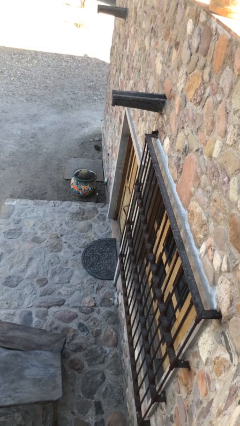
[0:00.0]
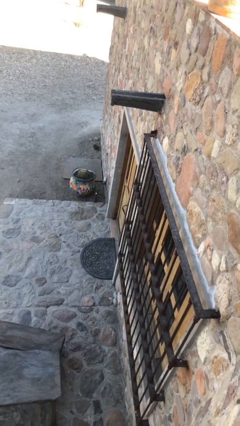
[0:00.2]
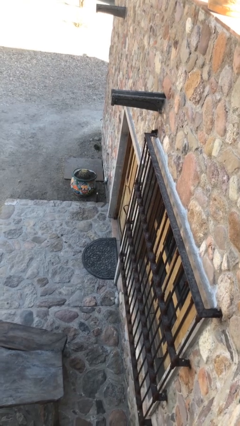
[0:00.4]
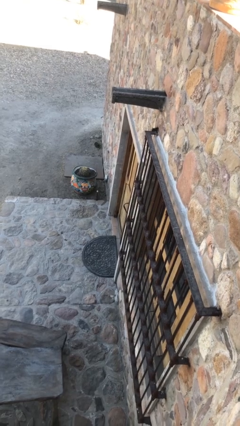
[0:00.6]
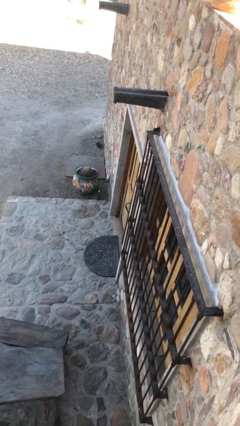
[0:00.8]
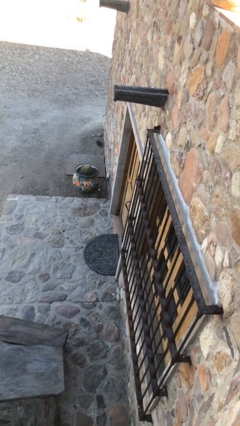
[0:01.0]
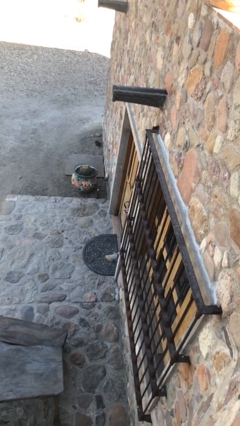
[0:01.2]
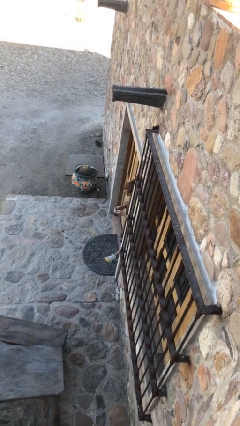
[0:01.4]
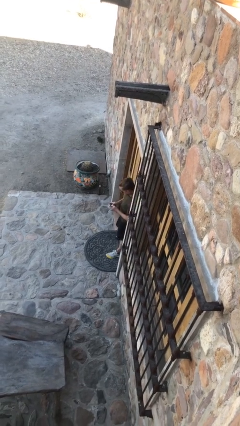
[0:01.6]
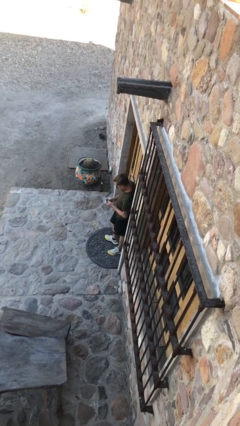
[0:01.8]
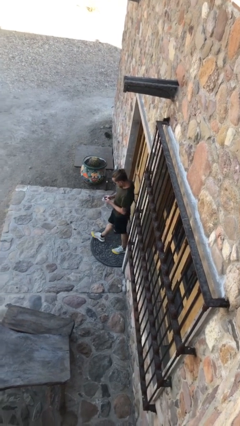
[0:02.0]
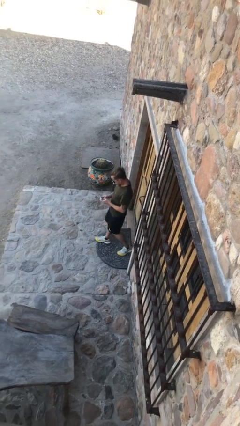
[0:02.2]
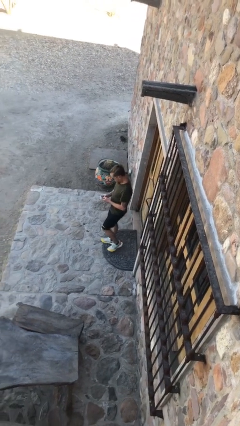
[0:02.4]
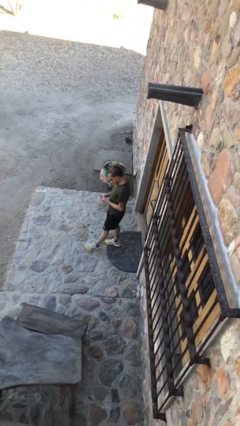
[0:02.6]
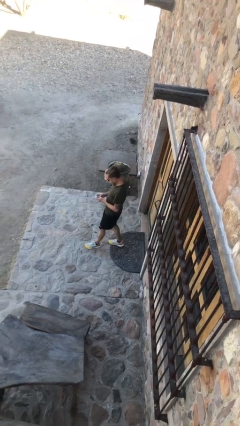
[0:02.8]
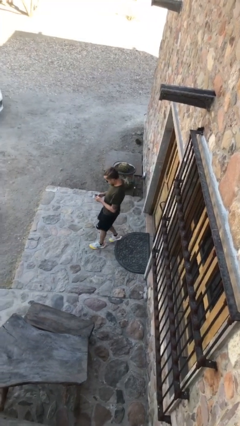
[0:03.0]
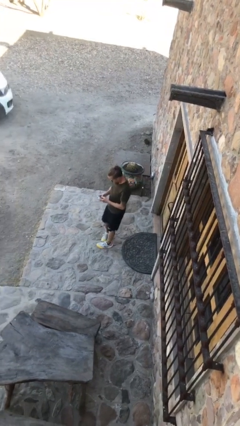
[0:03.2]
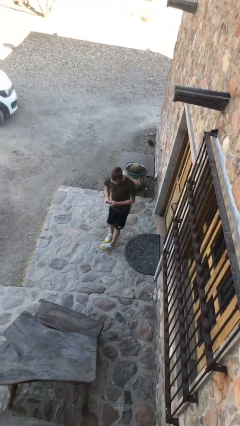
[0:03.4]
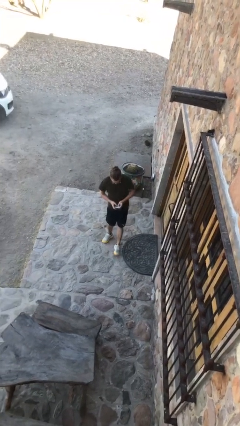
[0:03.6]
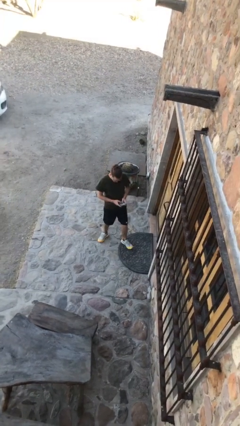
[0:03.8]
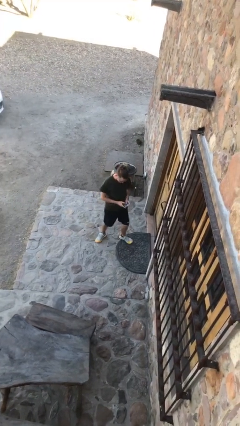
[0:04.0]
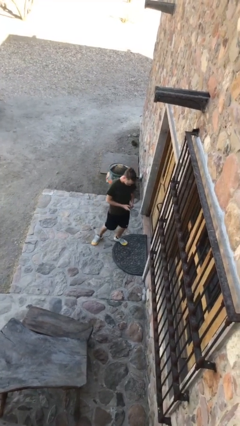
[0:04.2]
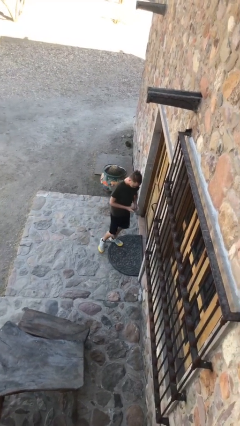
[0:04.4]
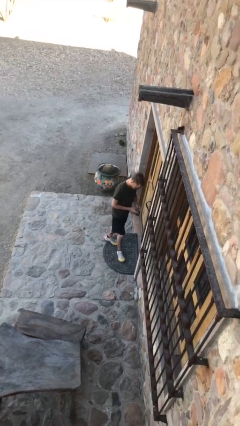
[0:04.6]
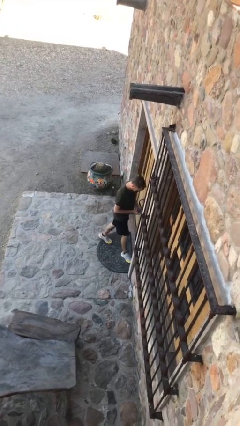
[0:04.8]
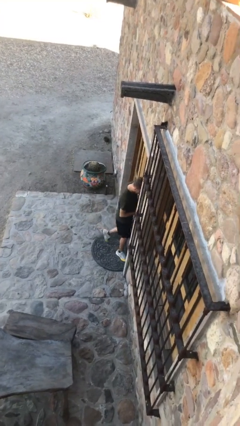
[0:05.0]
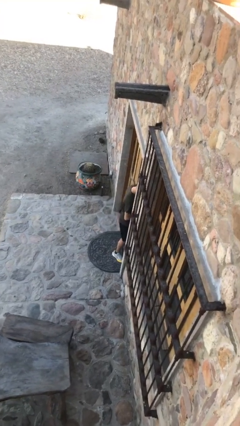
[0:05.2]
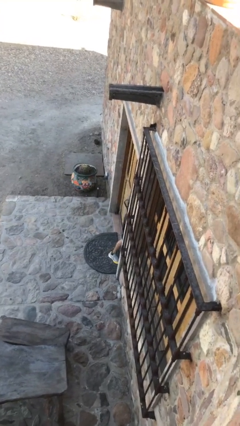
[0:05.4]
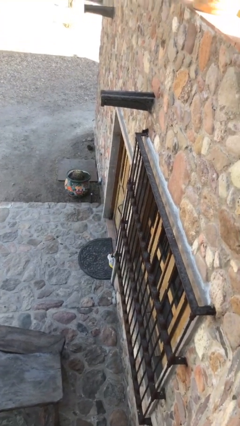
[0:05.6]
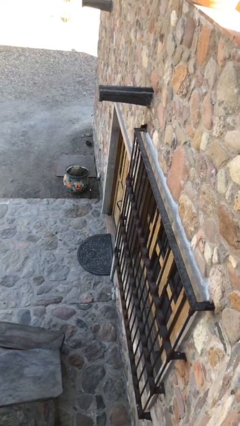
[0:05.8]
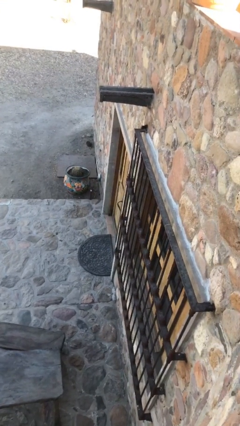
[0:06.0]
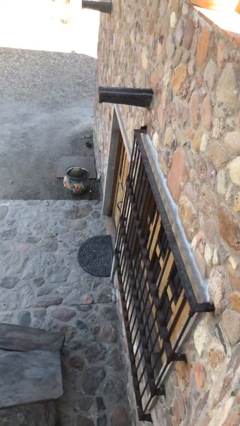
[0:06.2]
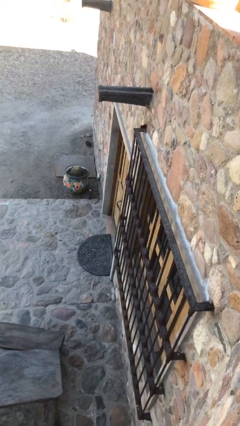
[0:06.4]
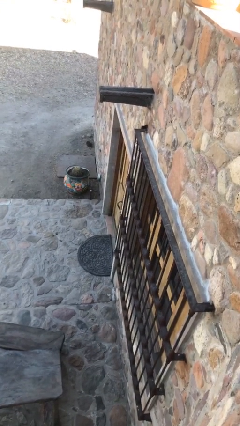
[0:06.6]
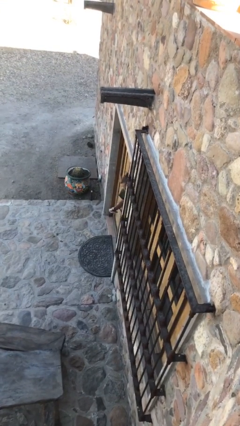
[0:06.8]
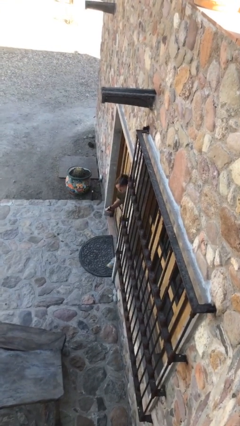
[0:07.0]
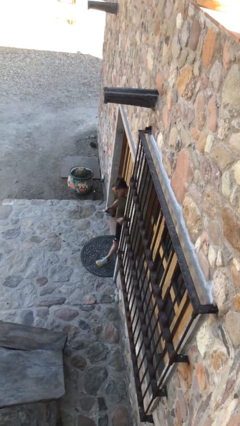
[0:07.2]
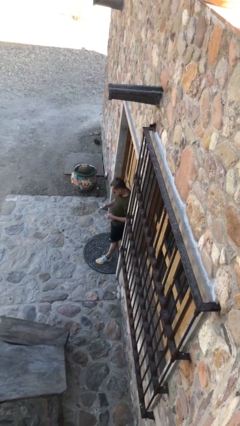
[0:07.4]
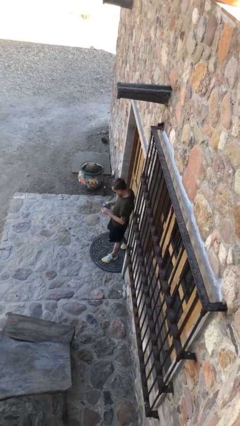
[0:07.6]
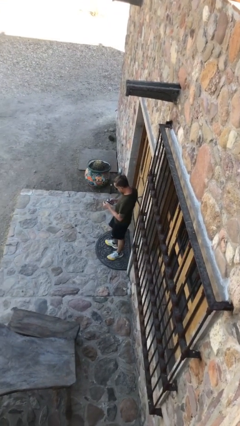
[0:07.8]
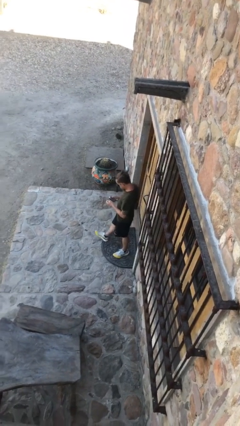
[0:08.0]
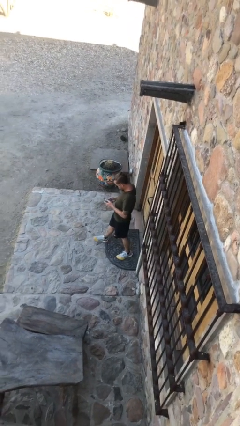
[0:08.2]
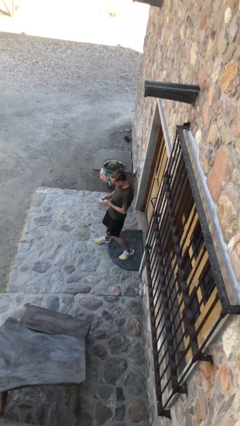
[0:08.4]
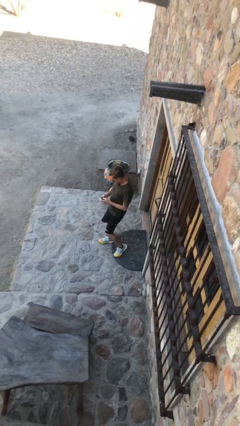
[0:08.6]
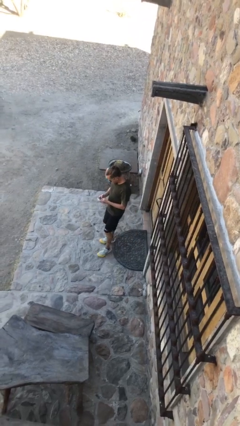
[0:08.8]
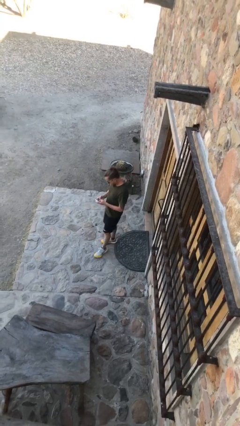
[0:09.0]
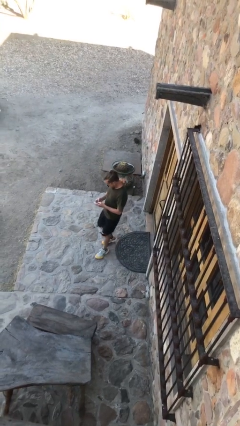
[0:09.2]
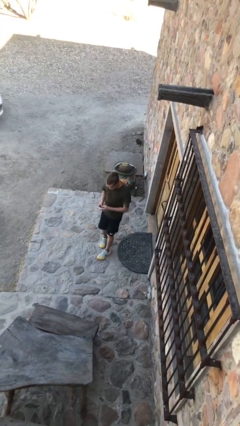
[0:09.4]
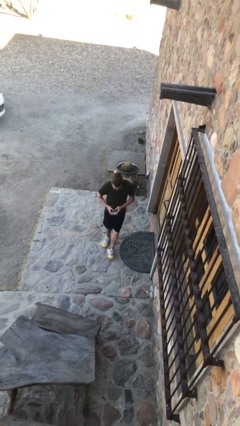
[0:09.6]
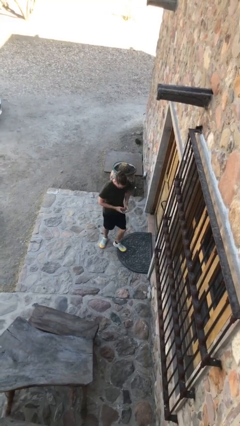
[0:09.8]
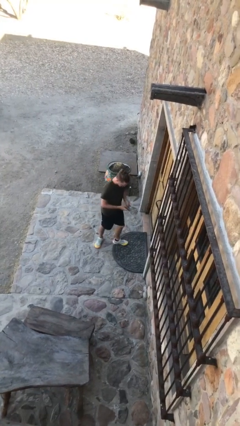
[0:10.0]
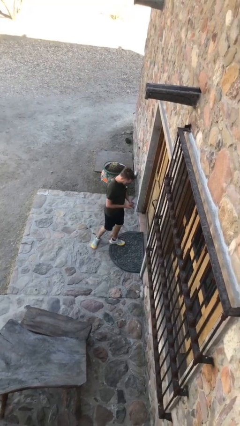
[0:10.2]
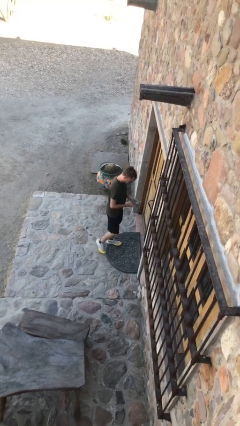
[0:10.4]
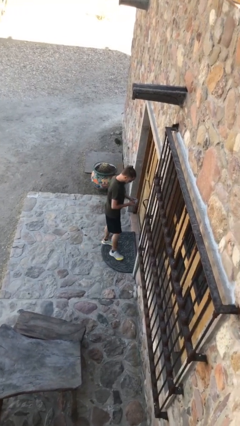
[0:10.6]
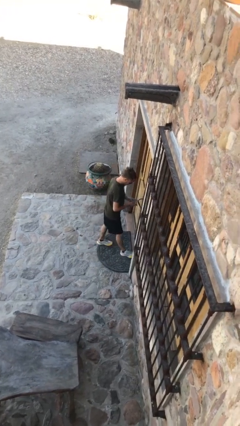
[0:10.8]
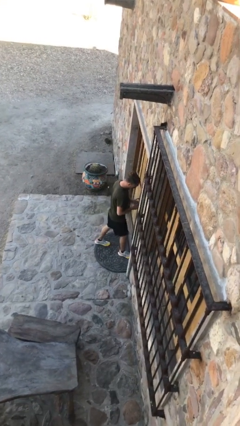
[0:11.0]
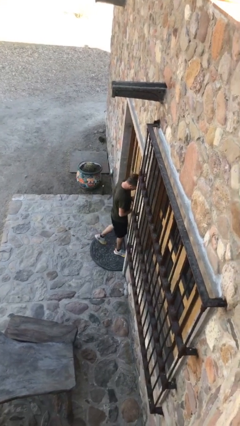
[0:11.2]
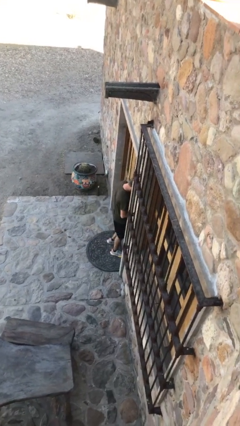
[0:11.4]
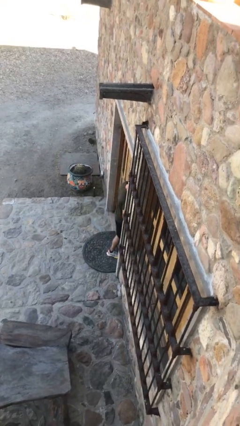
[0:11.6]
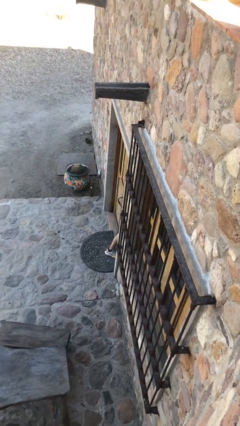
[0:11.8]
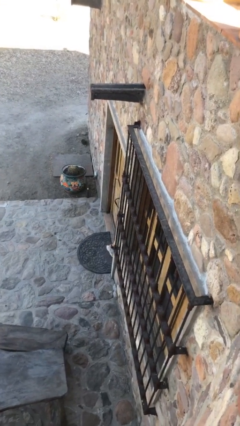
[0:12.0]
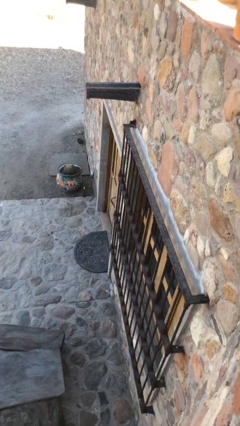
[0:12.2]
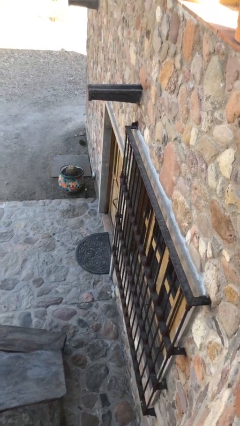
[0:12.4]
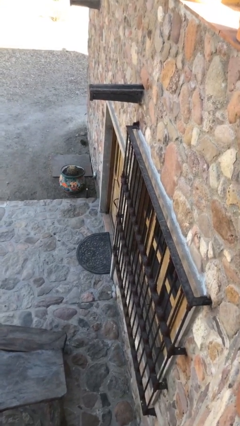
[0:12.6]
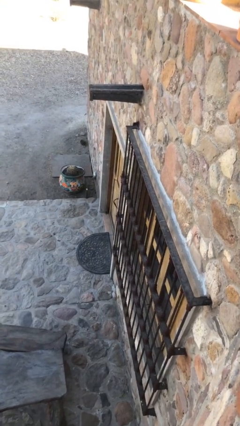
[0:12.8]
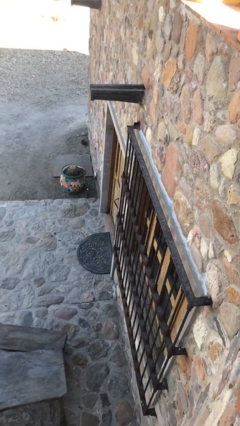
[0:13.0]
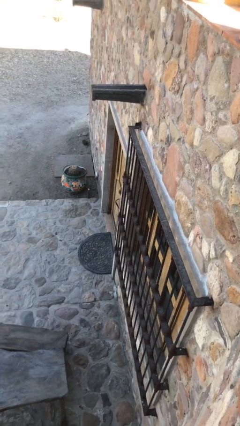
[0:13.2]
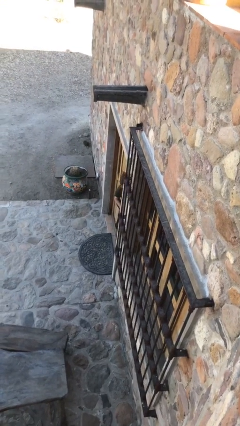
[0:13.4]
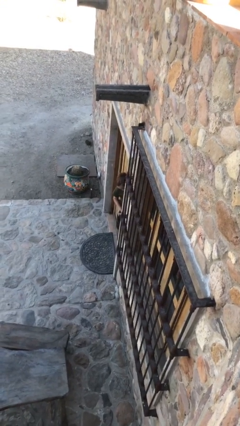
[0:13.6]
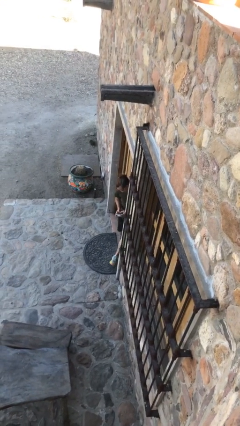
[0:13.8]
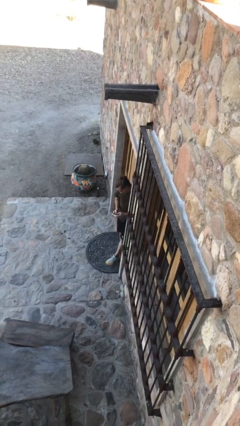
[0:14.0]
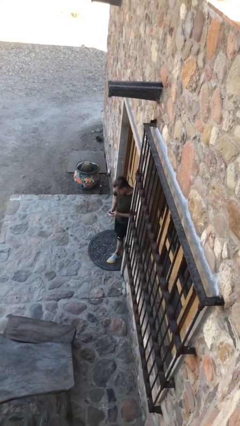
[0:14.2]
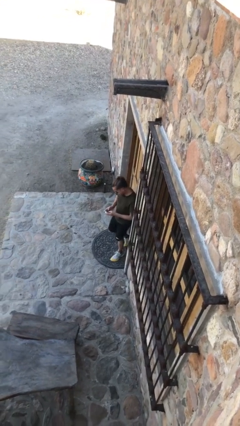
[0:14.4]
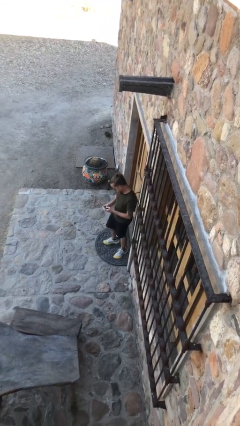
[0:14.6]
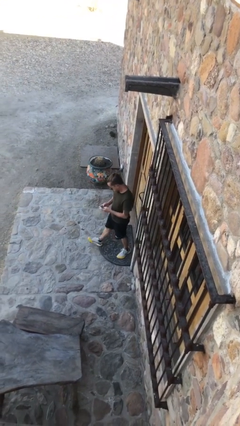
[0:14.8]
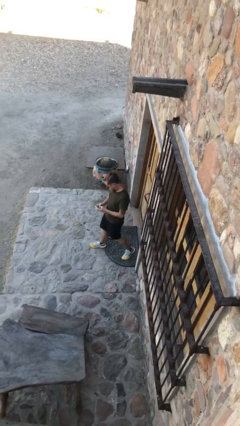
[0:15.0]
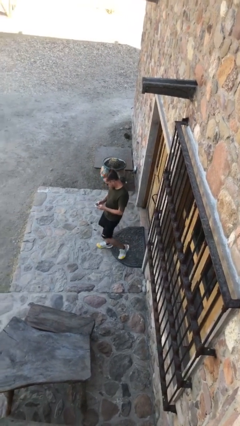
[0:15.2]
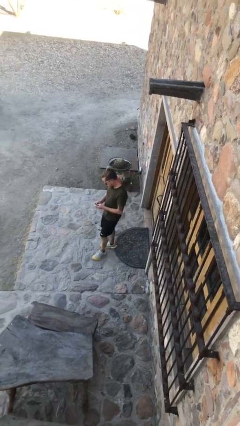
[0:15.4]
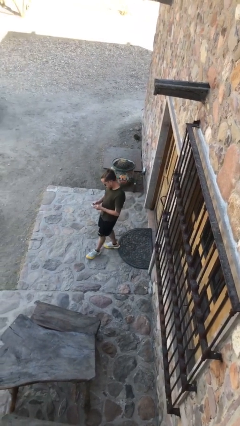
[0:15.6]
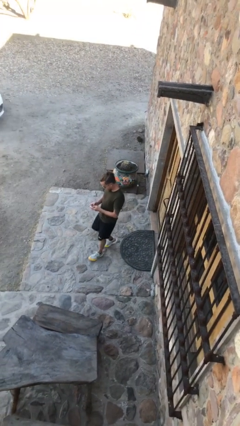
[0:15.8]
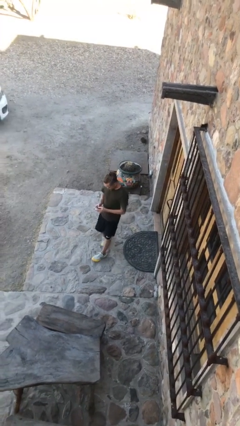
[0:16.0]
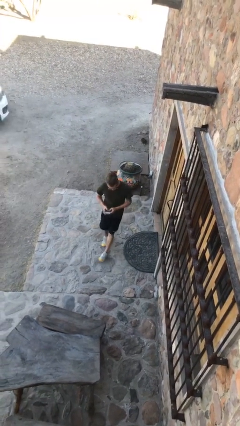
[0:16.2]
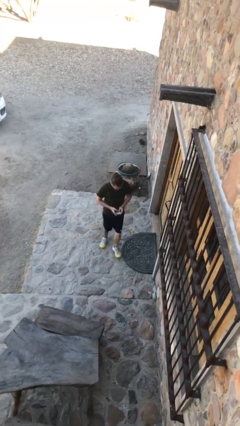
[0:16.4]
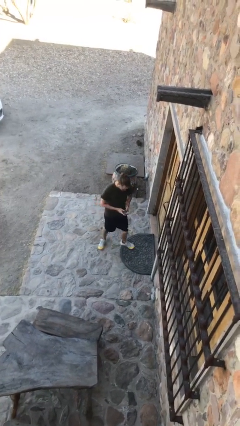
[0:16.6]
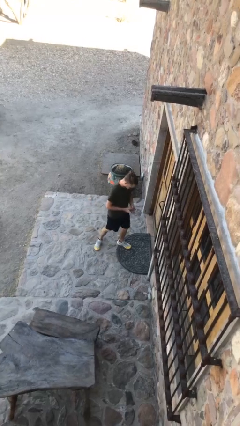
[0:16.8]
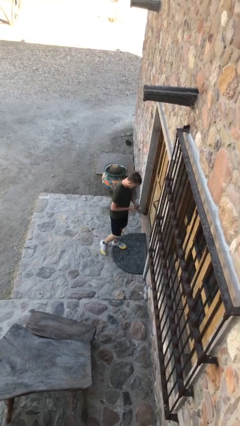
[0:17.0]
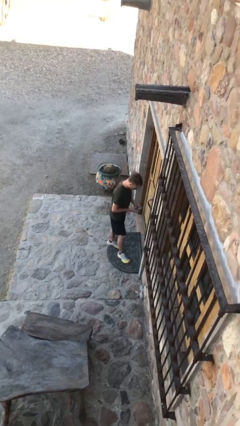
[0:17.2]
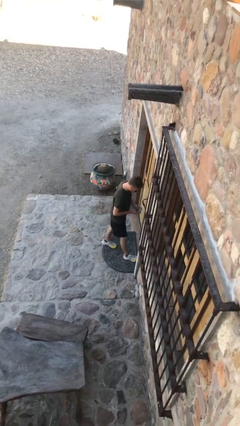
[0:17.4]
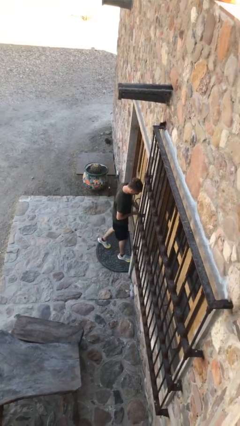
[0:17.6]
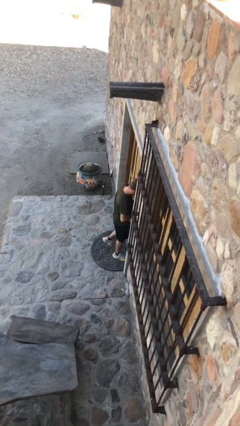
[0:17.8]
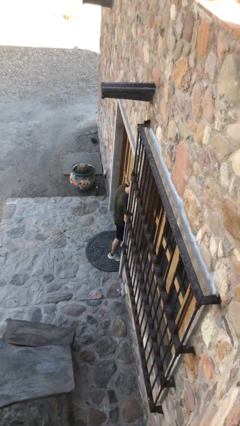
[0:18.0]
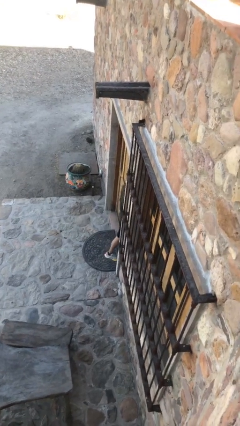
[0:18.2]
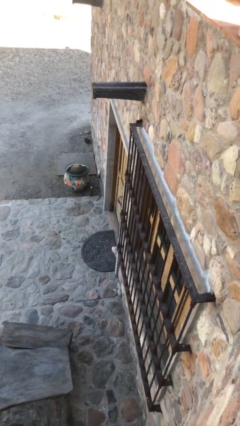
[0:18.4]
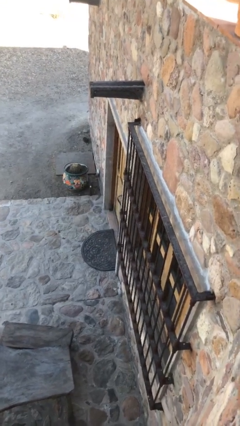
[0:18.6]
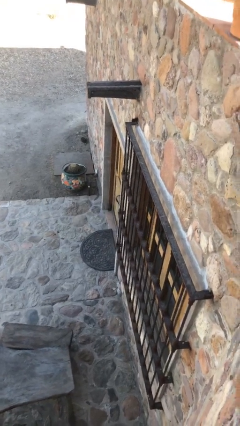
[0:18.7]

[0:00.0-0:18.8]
person texts on phone
